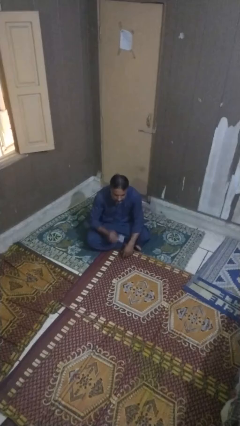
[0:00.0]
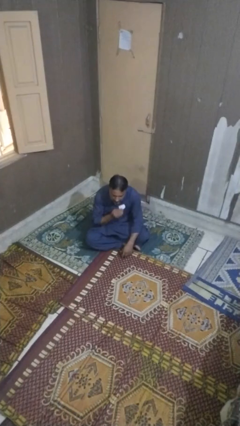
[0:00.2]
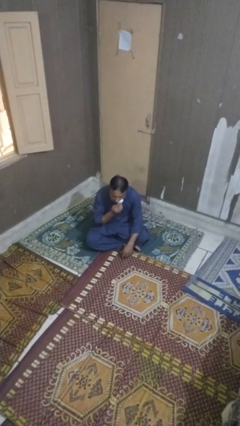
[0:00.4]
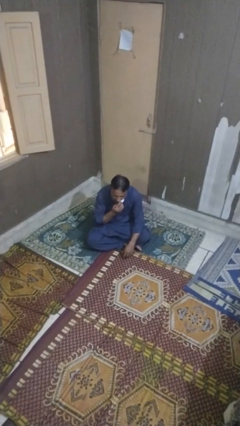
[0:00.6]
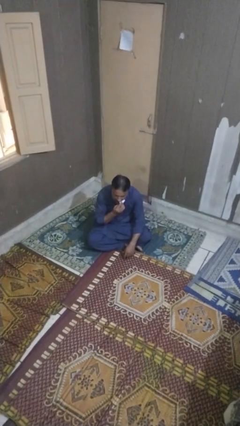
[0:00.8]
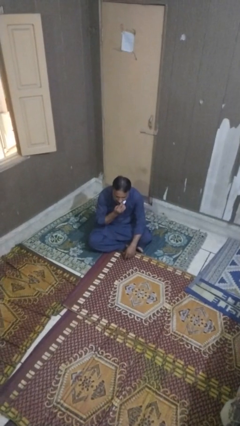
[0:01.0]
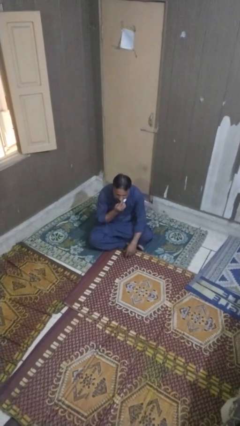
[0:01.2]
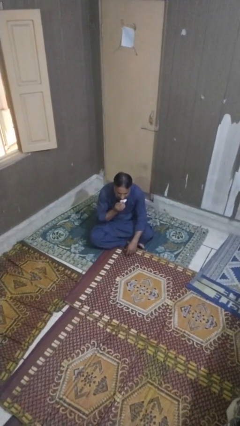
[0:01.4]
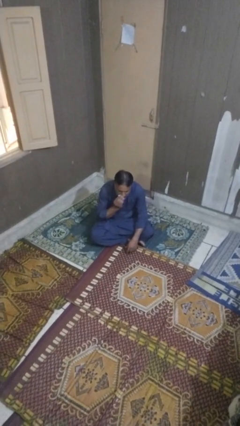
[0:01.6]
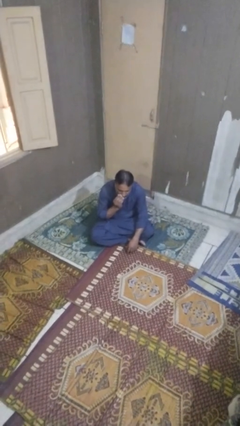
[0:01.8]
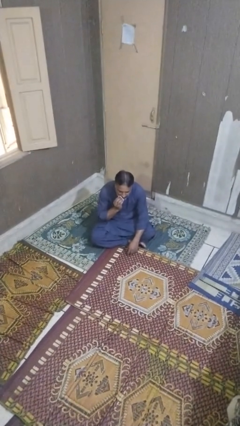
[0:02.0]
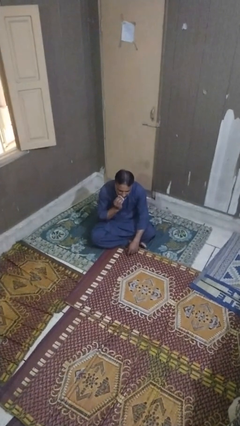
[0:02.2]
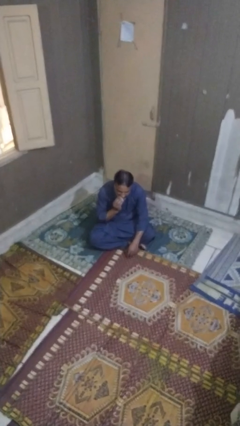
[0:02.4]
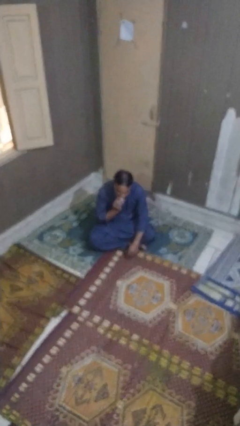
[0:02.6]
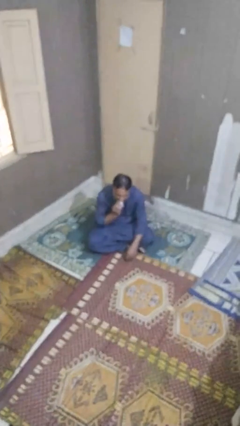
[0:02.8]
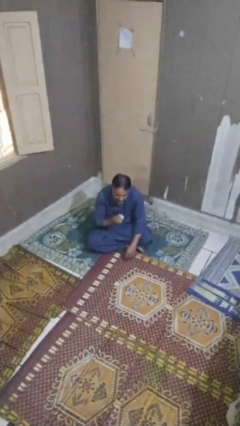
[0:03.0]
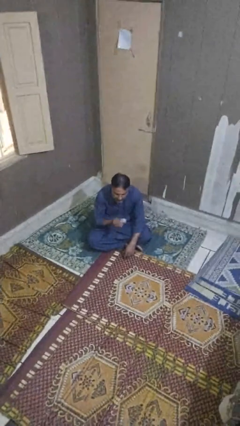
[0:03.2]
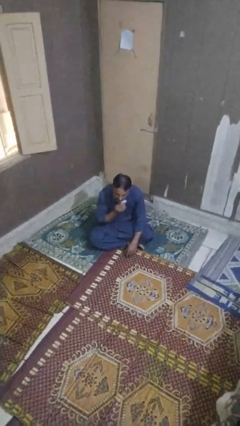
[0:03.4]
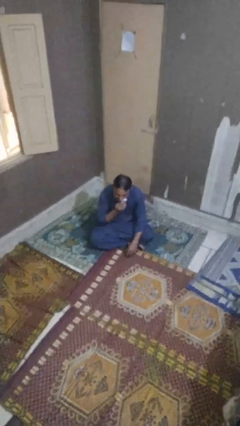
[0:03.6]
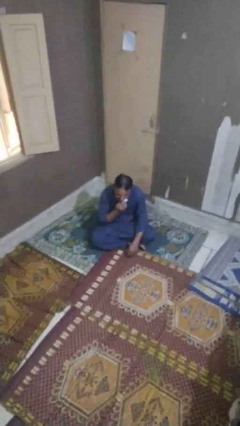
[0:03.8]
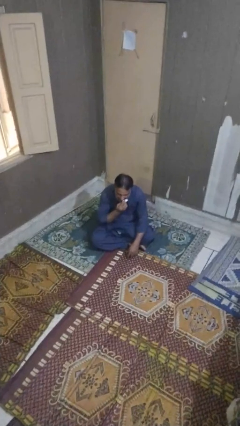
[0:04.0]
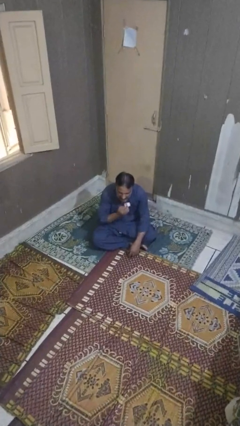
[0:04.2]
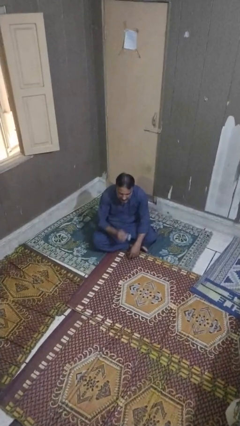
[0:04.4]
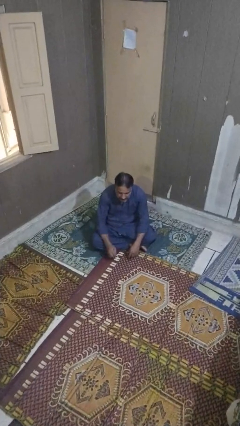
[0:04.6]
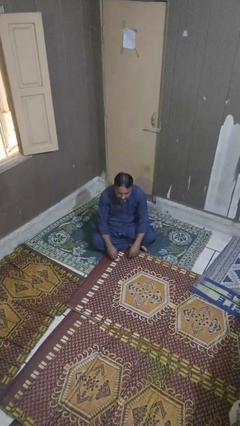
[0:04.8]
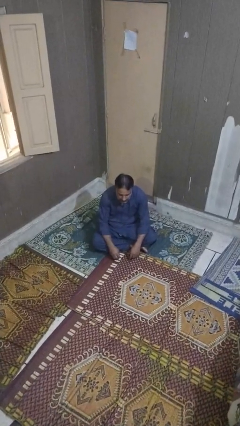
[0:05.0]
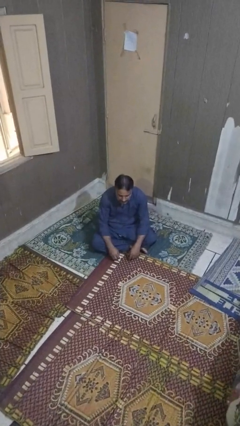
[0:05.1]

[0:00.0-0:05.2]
person wipes mouth with napkin

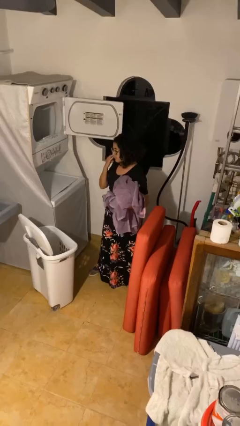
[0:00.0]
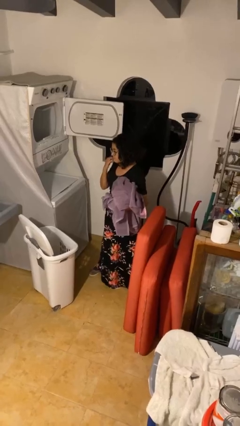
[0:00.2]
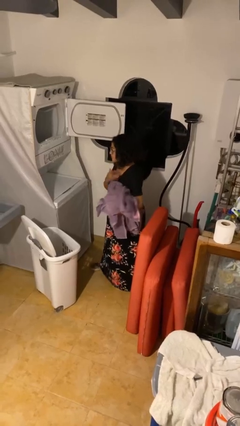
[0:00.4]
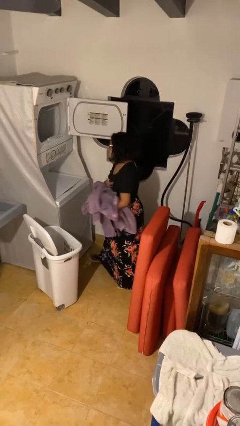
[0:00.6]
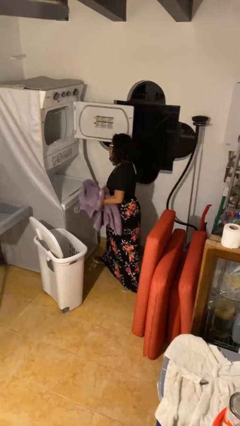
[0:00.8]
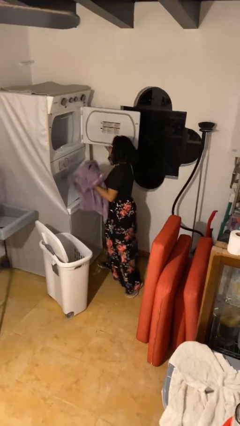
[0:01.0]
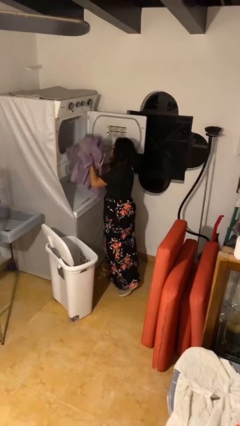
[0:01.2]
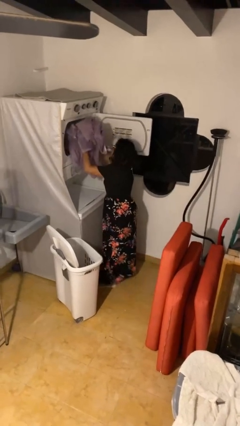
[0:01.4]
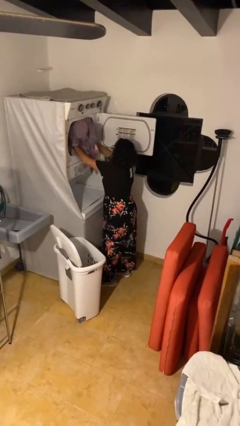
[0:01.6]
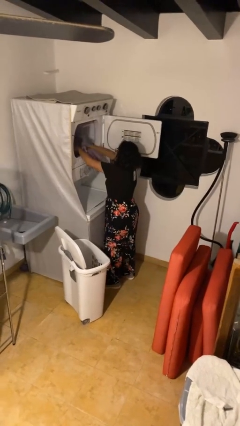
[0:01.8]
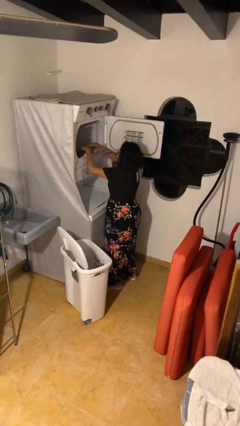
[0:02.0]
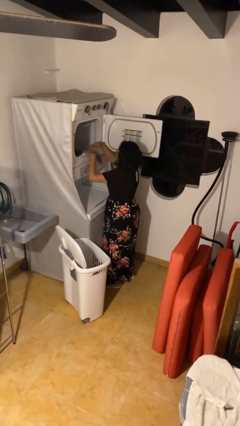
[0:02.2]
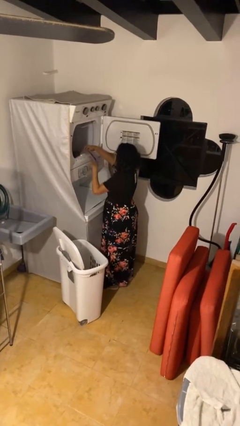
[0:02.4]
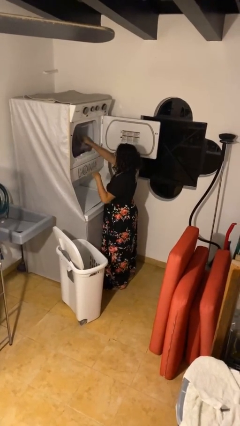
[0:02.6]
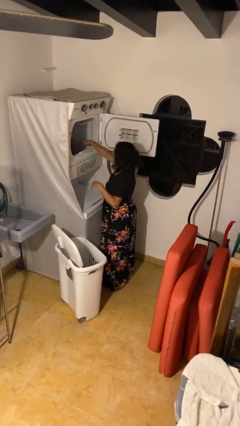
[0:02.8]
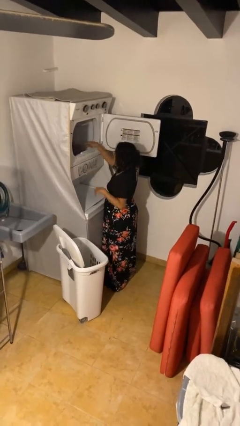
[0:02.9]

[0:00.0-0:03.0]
person loads dryer

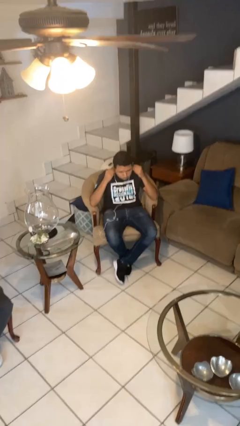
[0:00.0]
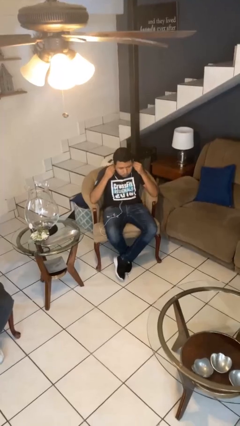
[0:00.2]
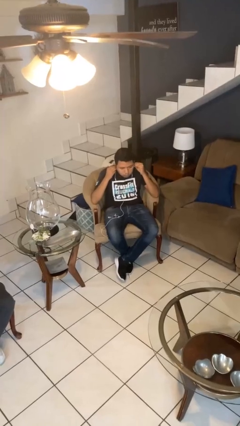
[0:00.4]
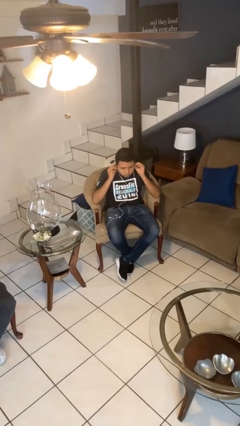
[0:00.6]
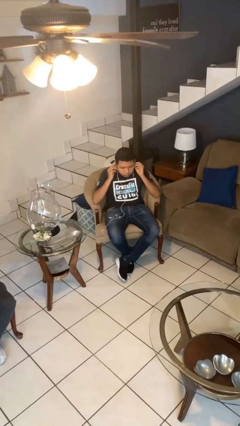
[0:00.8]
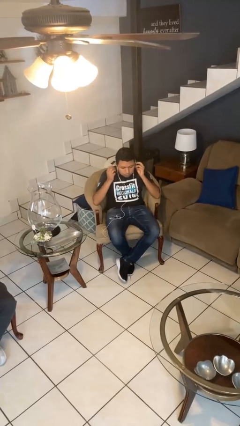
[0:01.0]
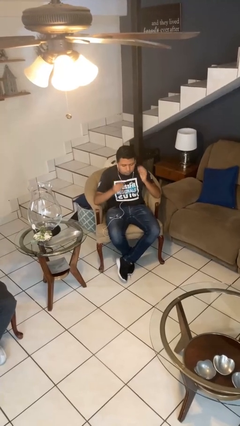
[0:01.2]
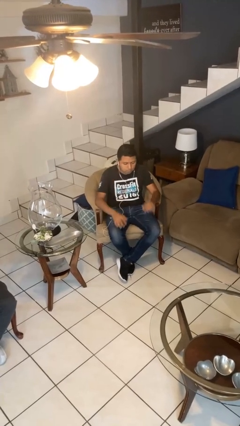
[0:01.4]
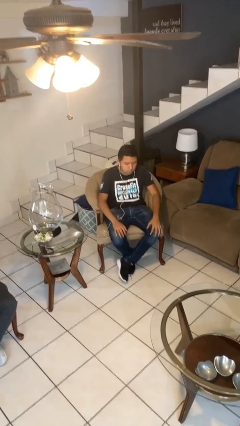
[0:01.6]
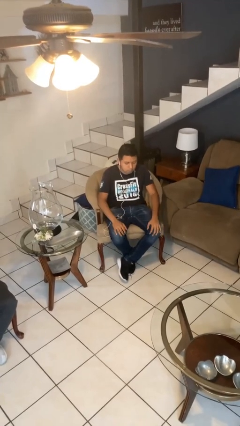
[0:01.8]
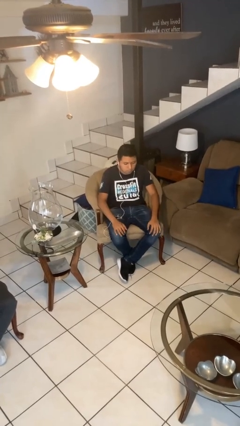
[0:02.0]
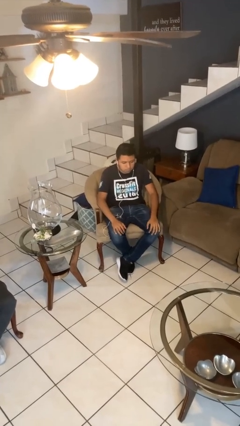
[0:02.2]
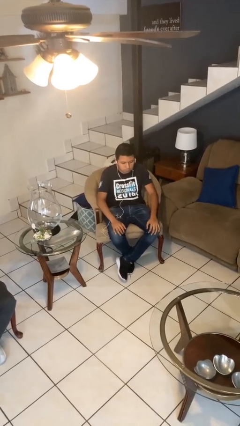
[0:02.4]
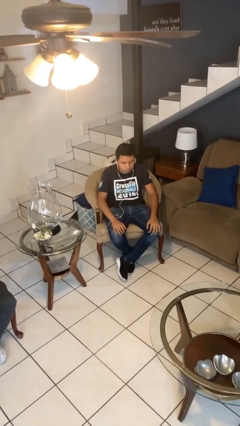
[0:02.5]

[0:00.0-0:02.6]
person puts on headphones

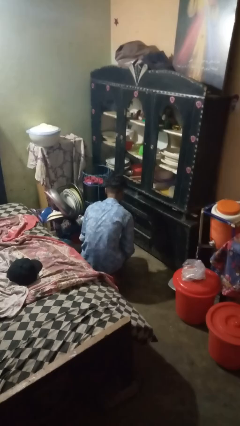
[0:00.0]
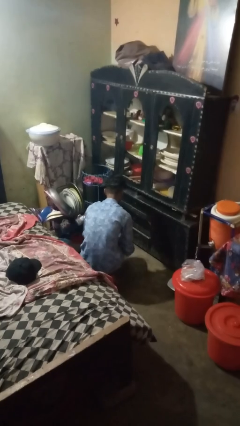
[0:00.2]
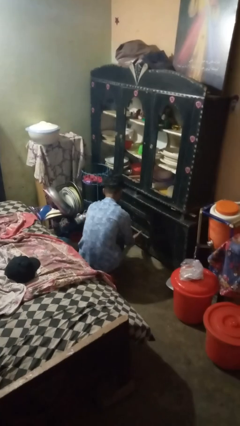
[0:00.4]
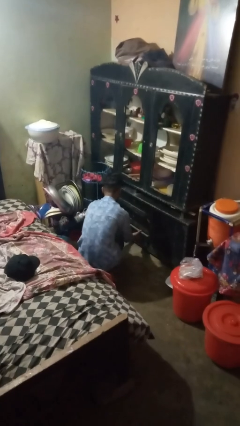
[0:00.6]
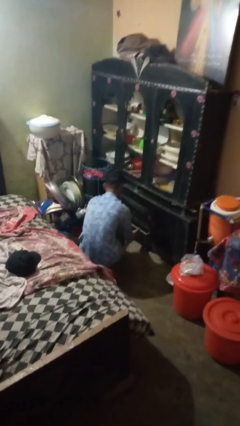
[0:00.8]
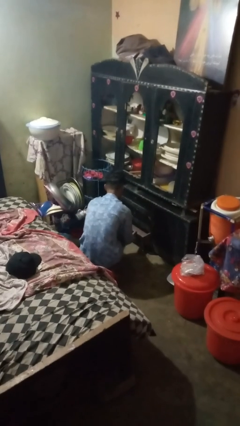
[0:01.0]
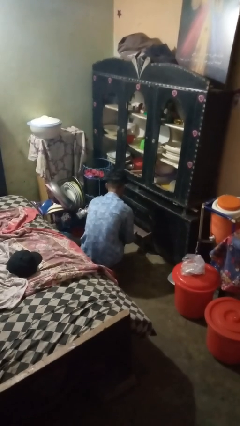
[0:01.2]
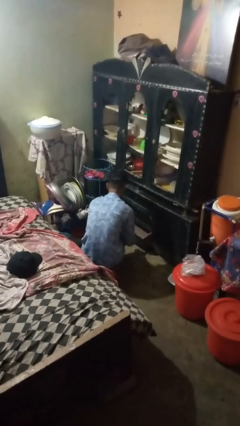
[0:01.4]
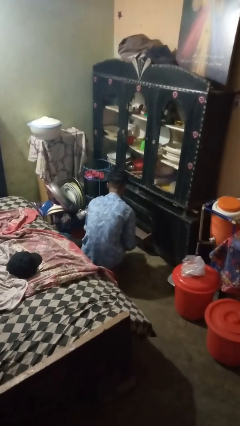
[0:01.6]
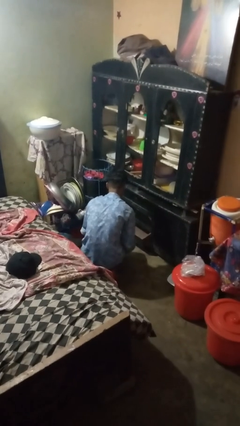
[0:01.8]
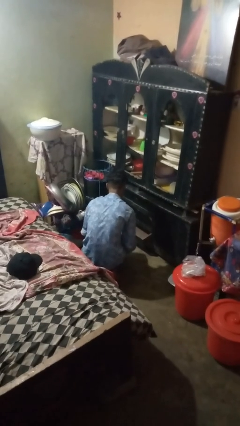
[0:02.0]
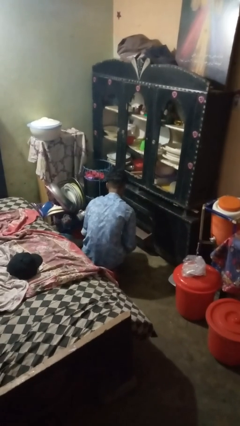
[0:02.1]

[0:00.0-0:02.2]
person opens kitchen drawer

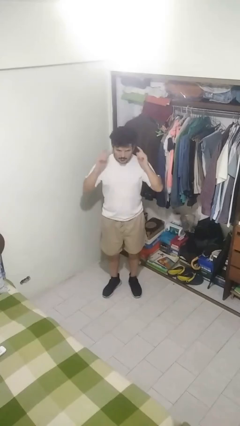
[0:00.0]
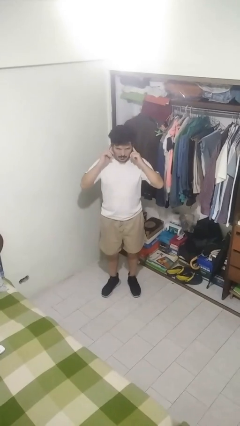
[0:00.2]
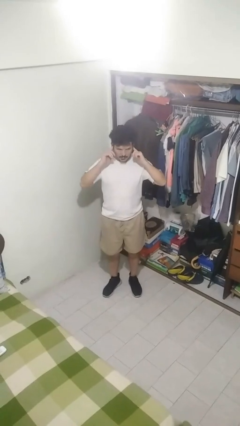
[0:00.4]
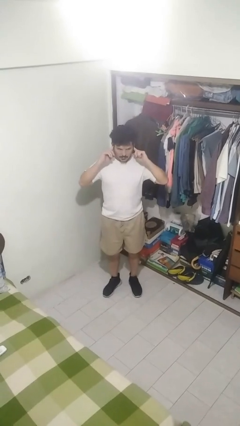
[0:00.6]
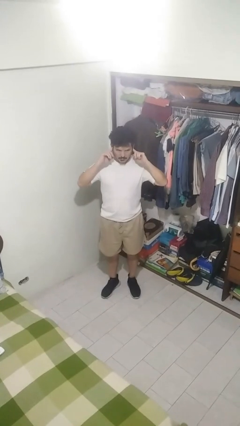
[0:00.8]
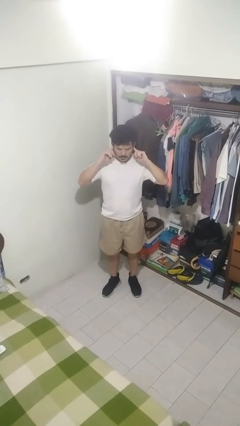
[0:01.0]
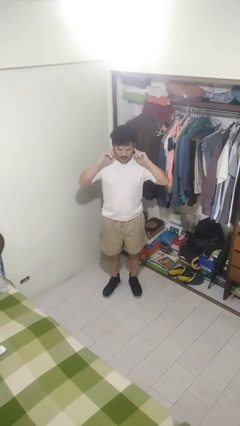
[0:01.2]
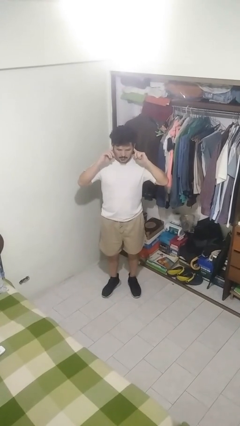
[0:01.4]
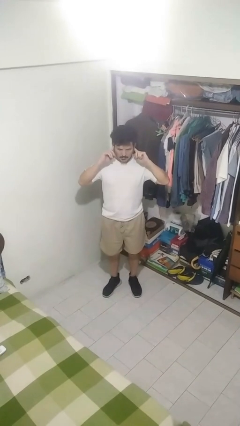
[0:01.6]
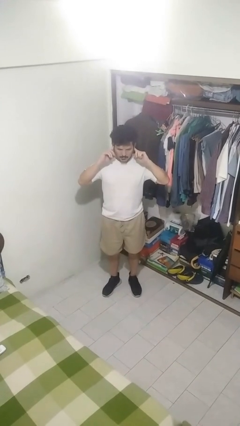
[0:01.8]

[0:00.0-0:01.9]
person puts fingers in ear

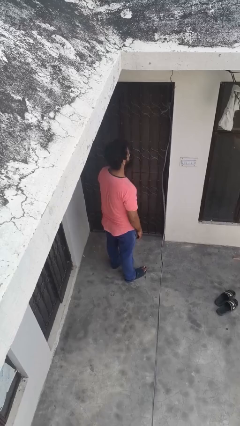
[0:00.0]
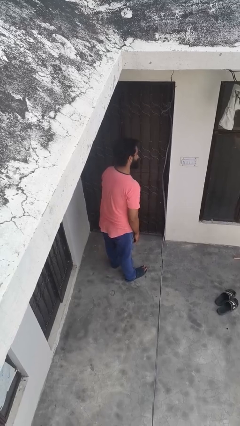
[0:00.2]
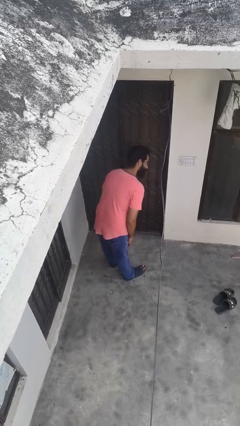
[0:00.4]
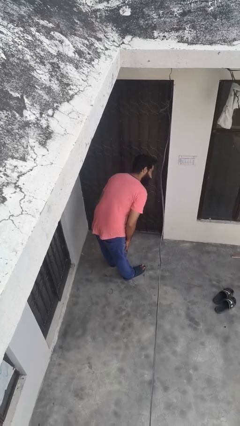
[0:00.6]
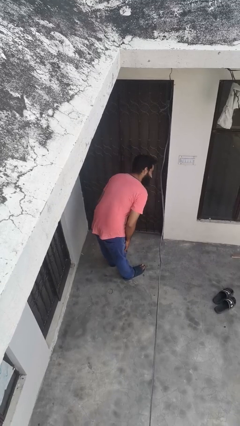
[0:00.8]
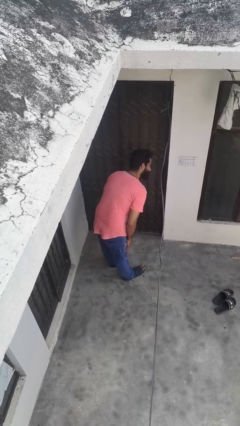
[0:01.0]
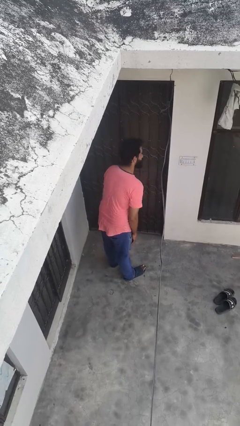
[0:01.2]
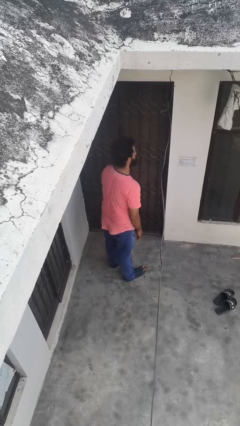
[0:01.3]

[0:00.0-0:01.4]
person bows

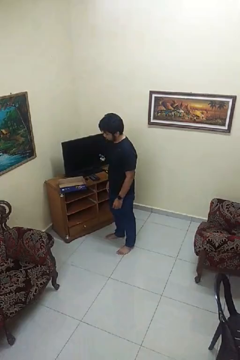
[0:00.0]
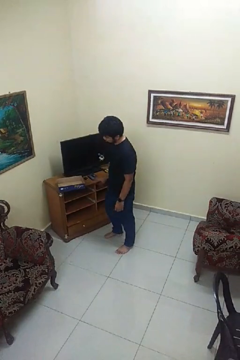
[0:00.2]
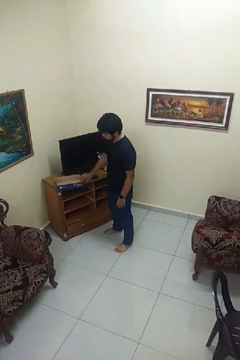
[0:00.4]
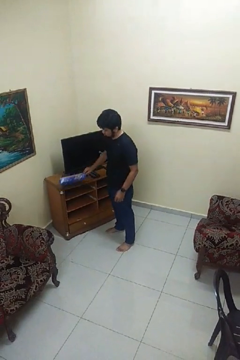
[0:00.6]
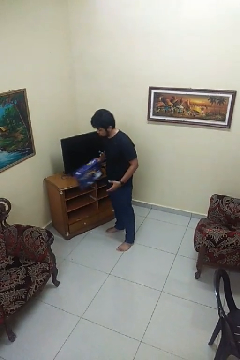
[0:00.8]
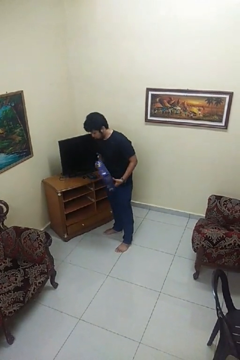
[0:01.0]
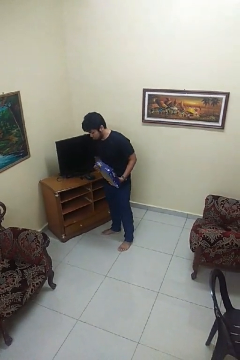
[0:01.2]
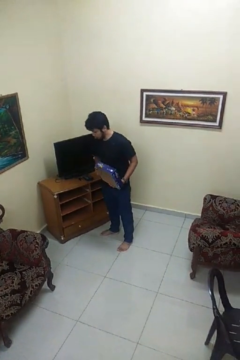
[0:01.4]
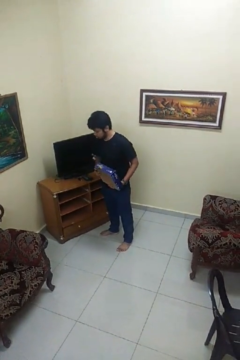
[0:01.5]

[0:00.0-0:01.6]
person picks up object from countertop
